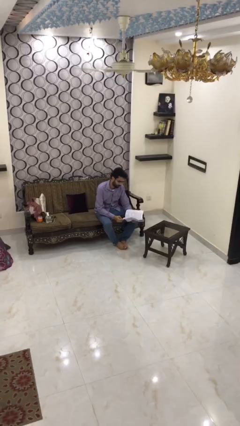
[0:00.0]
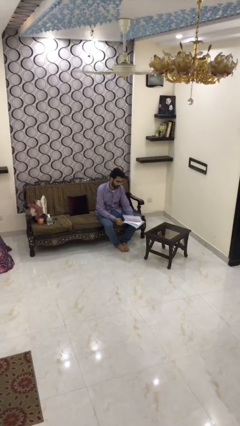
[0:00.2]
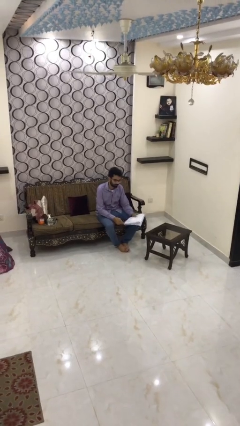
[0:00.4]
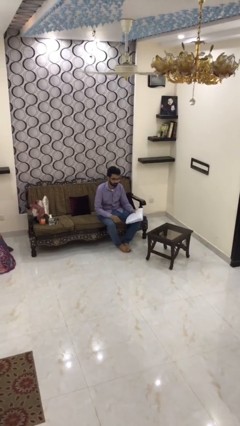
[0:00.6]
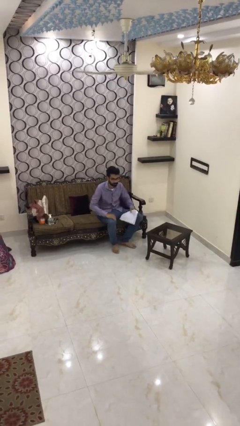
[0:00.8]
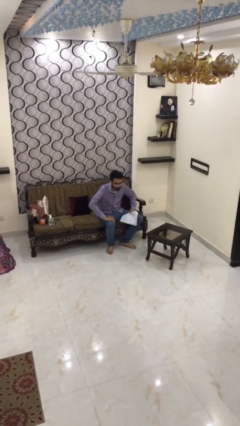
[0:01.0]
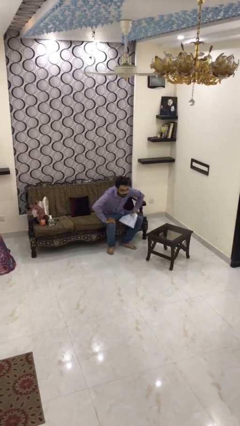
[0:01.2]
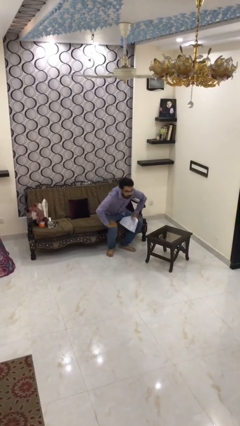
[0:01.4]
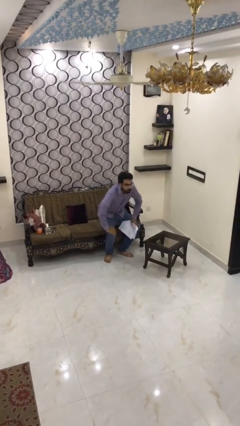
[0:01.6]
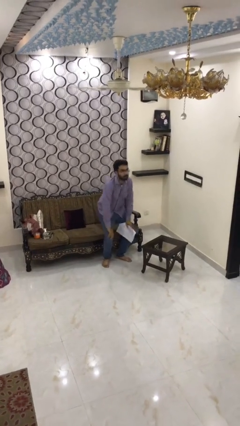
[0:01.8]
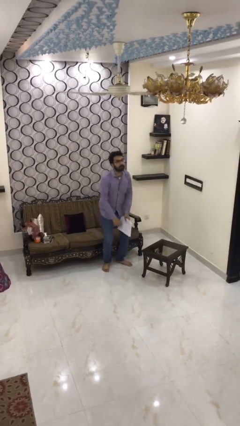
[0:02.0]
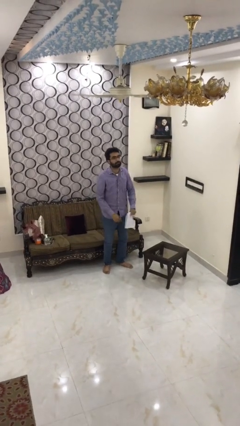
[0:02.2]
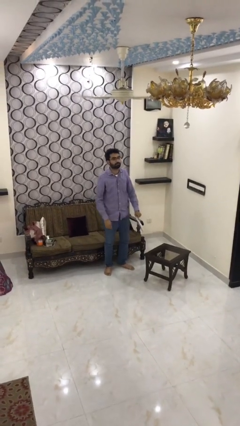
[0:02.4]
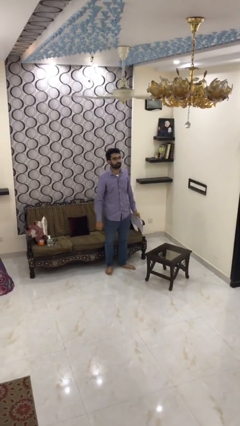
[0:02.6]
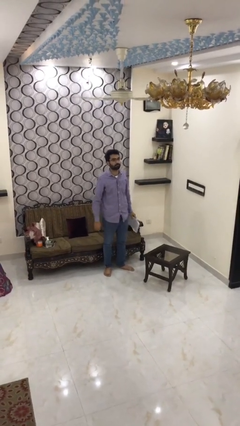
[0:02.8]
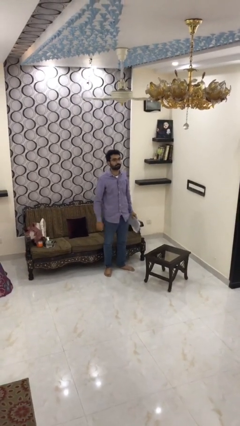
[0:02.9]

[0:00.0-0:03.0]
person stands up

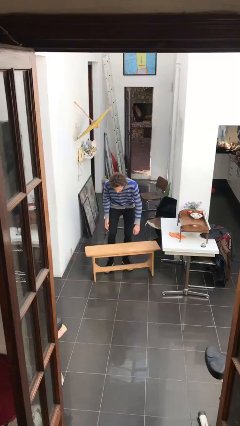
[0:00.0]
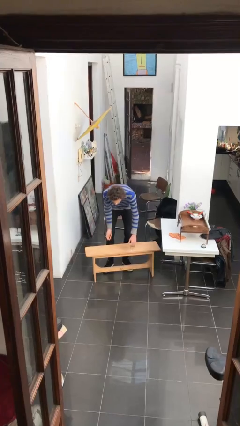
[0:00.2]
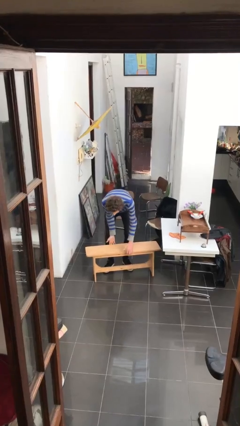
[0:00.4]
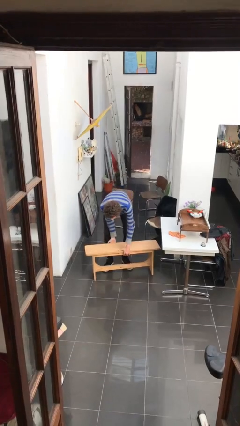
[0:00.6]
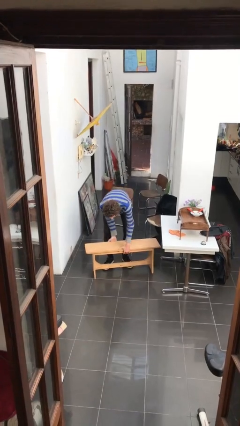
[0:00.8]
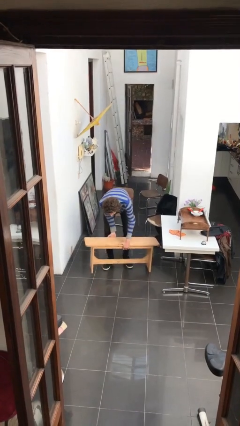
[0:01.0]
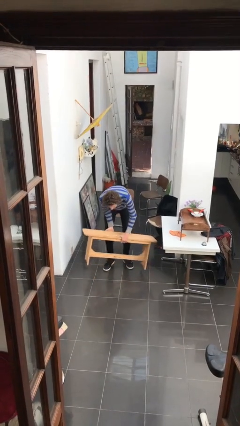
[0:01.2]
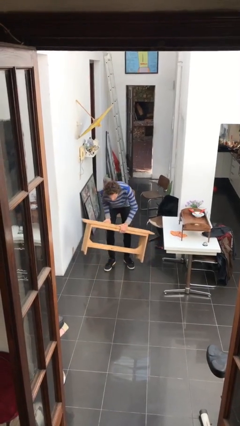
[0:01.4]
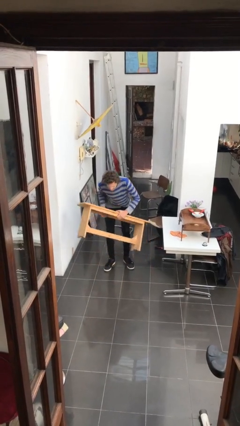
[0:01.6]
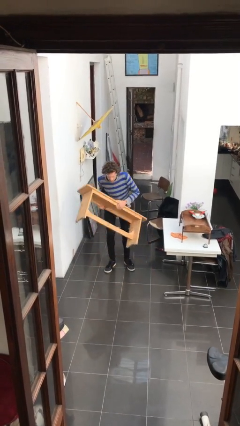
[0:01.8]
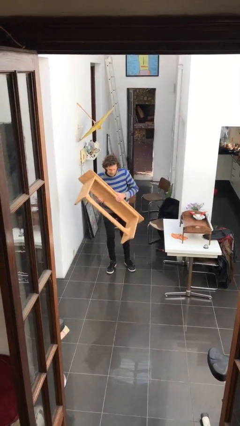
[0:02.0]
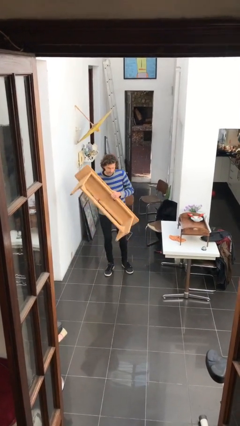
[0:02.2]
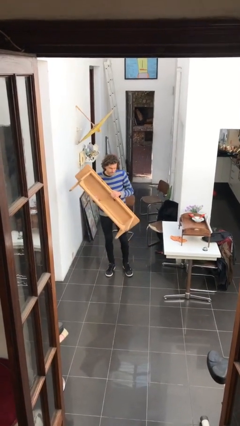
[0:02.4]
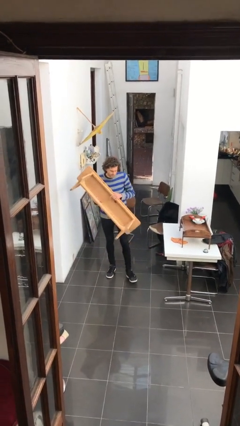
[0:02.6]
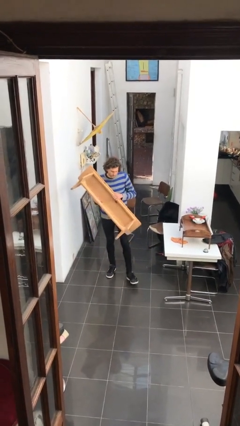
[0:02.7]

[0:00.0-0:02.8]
person picks up object from floor

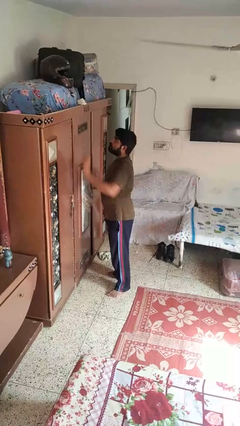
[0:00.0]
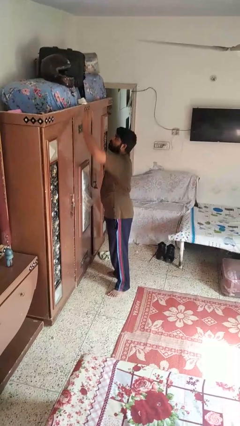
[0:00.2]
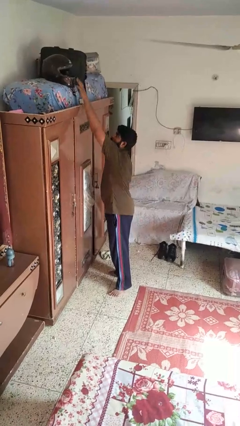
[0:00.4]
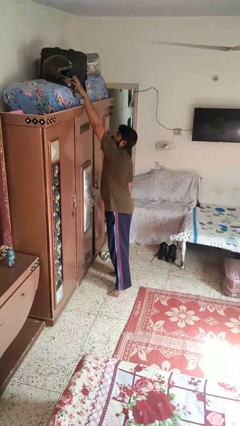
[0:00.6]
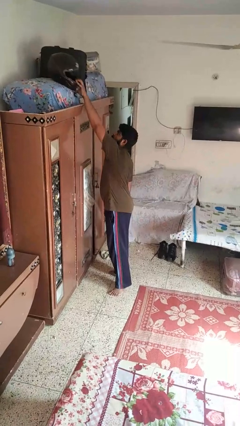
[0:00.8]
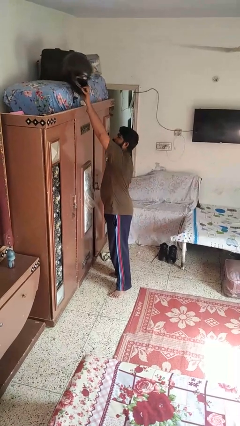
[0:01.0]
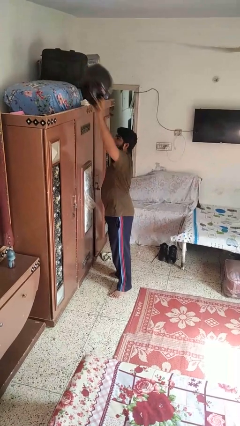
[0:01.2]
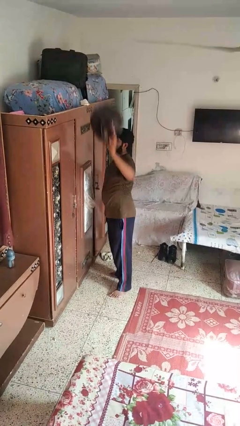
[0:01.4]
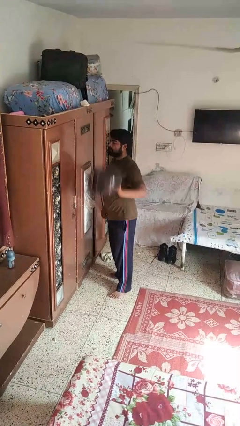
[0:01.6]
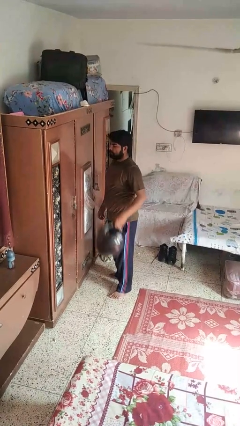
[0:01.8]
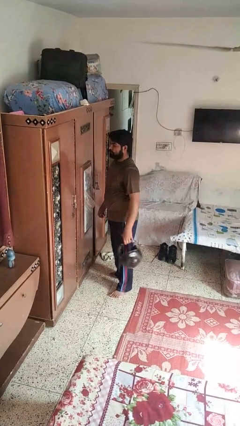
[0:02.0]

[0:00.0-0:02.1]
person picks up object from shelf

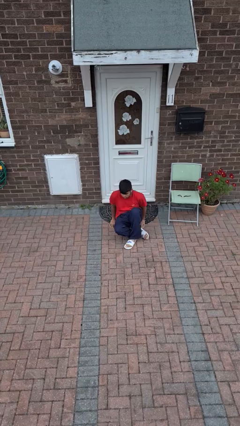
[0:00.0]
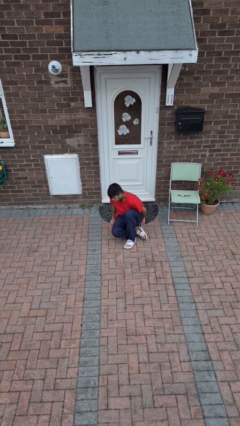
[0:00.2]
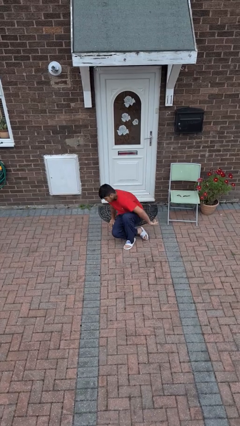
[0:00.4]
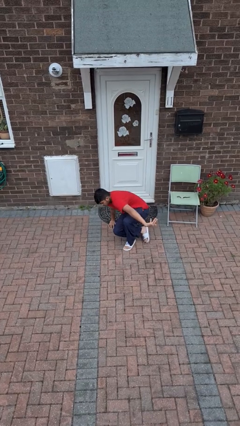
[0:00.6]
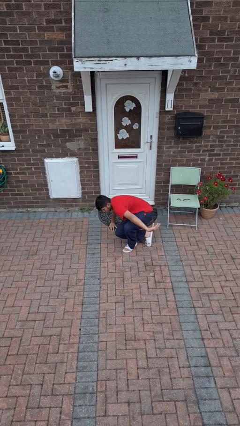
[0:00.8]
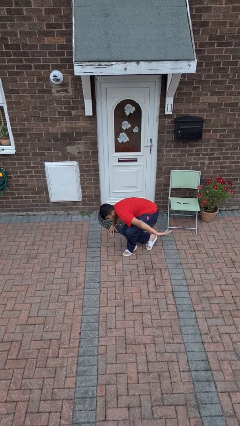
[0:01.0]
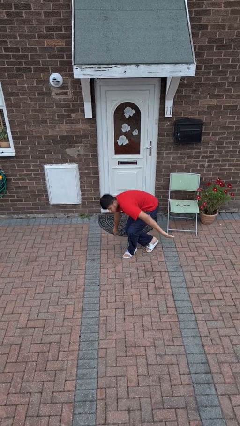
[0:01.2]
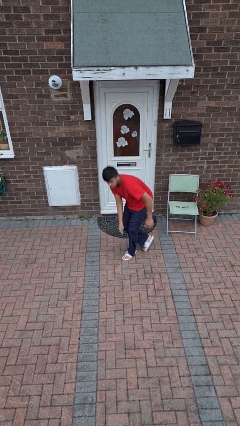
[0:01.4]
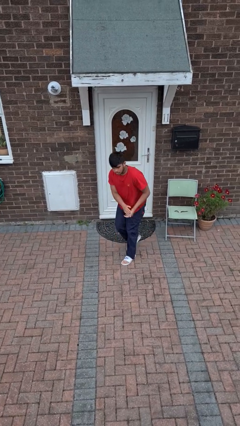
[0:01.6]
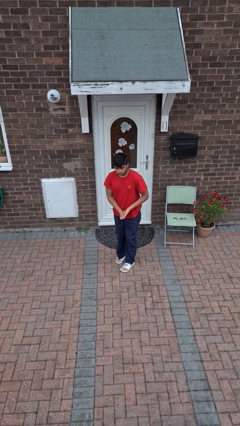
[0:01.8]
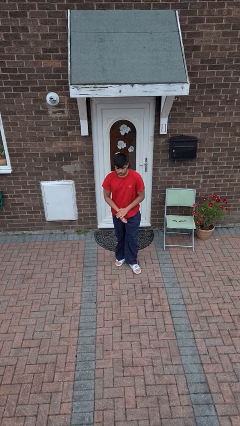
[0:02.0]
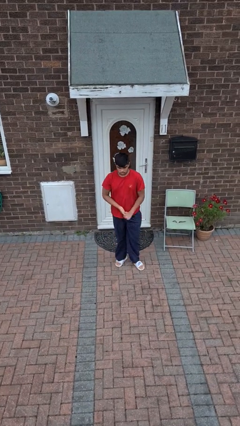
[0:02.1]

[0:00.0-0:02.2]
person stands up from floor

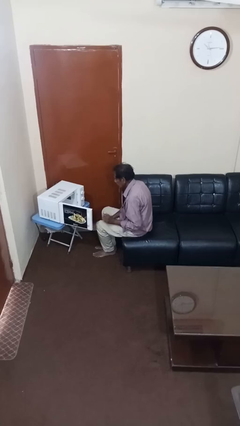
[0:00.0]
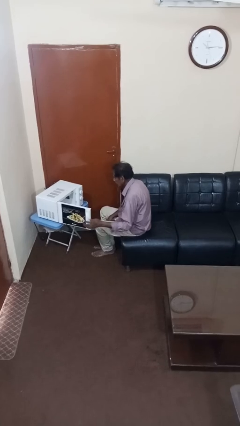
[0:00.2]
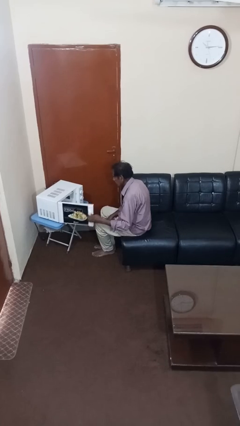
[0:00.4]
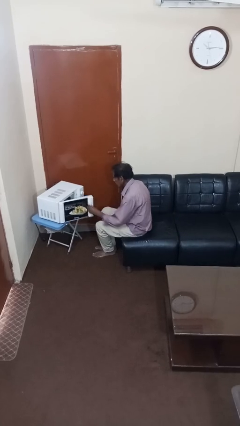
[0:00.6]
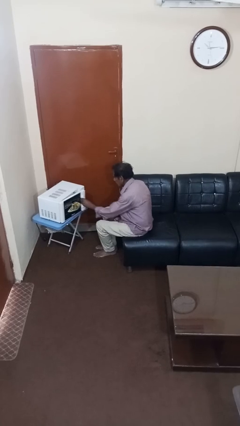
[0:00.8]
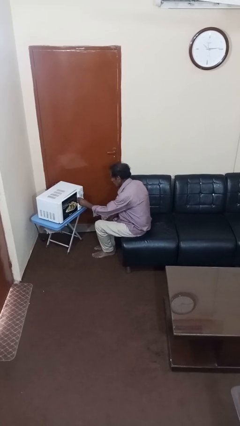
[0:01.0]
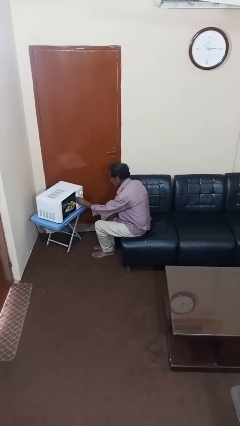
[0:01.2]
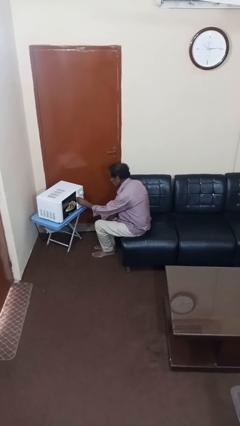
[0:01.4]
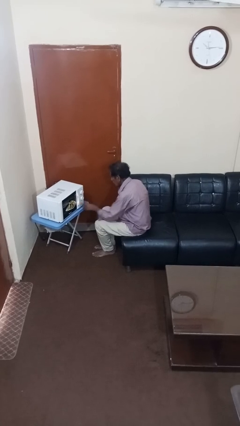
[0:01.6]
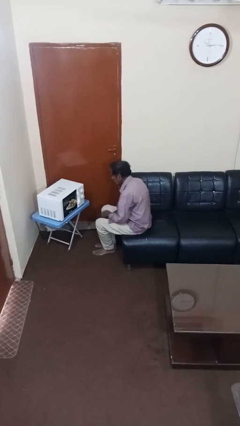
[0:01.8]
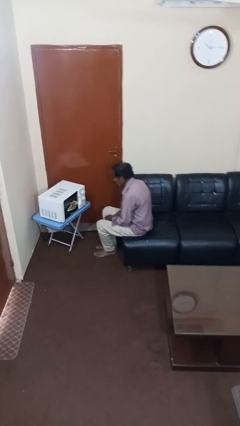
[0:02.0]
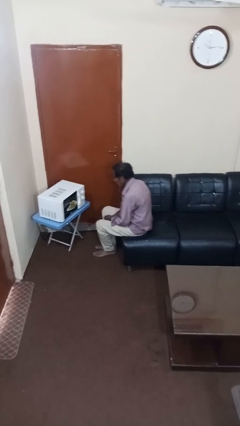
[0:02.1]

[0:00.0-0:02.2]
person closes microwave

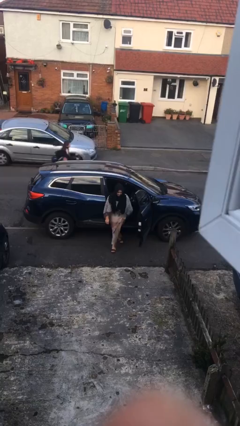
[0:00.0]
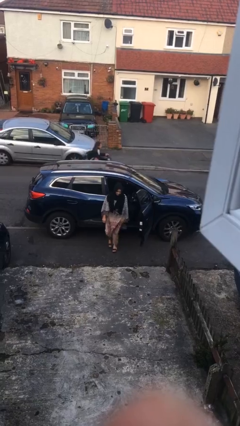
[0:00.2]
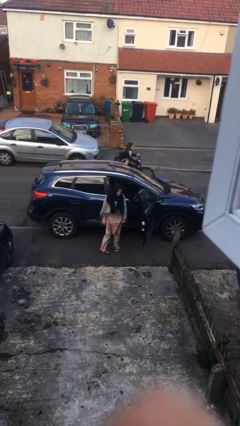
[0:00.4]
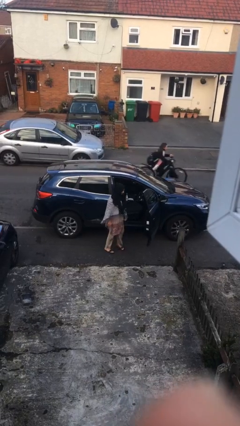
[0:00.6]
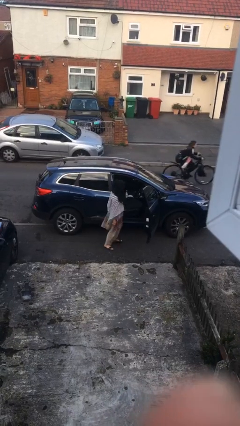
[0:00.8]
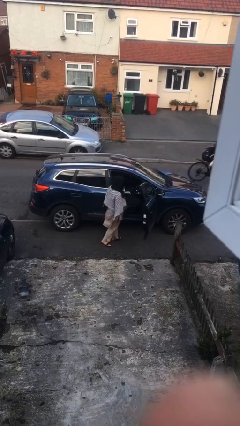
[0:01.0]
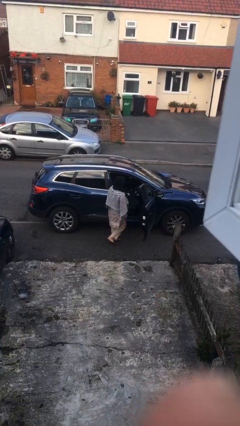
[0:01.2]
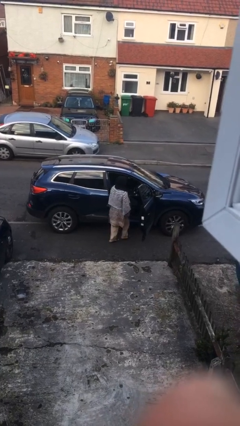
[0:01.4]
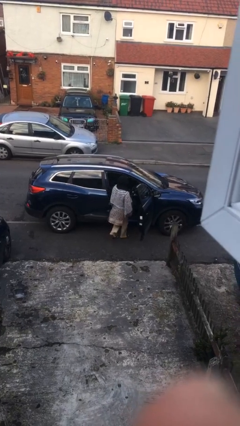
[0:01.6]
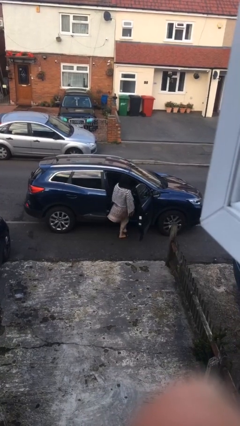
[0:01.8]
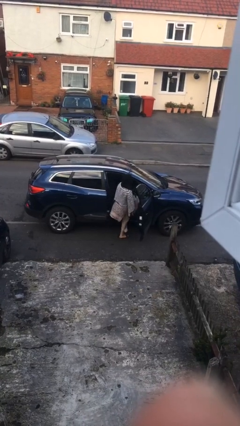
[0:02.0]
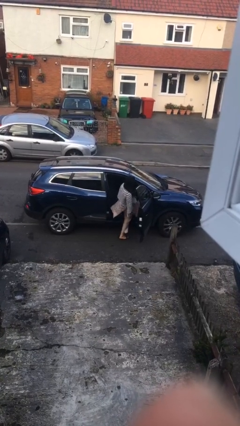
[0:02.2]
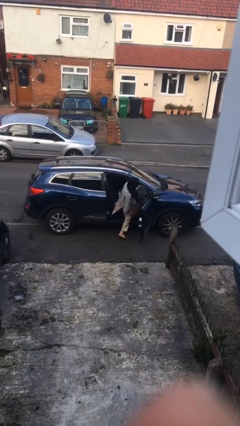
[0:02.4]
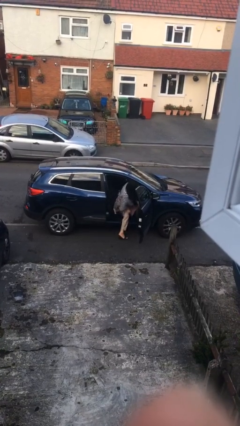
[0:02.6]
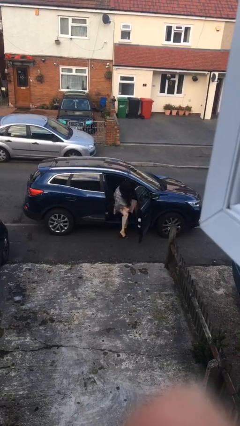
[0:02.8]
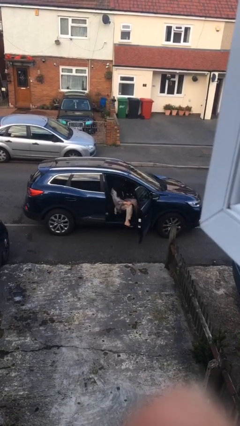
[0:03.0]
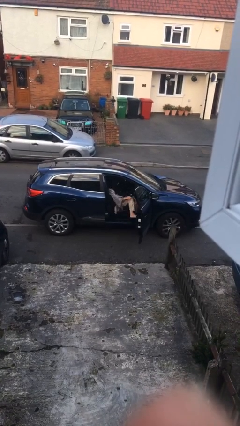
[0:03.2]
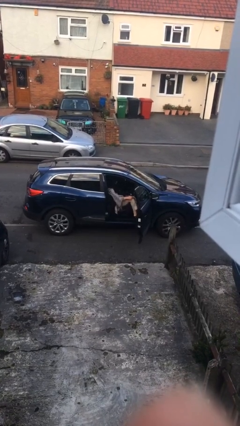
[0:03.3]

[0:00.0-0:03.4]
person enters car

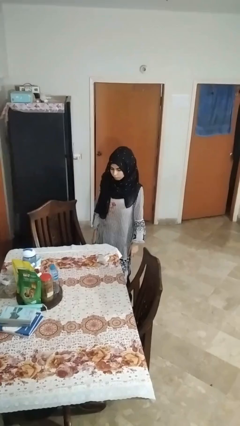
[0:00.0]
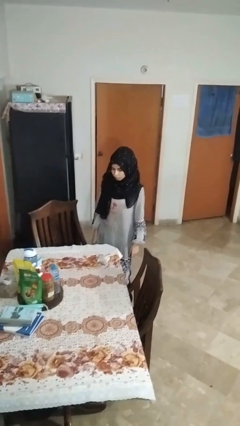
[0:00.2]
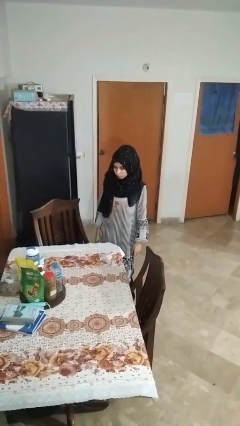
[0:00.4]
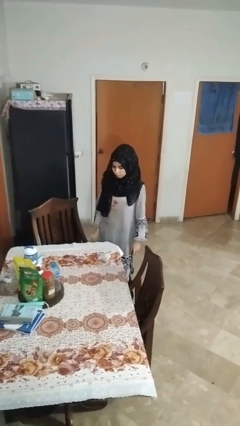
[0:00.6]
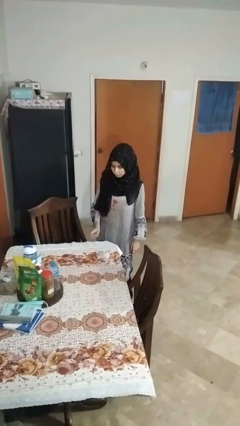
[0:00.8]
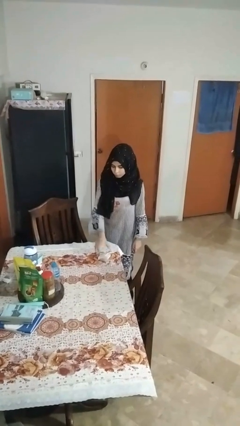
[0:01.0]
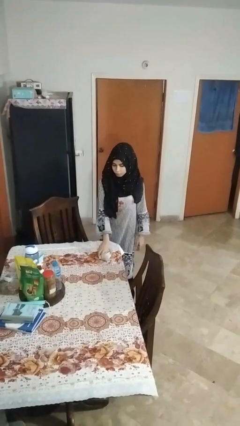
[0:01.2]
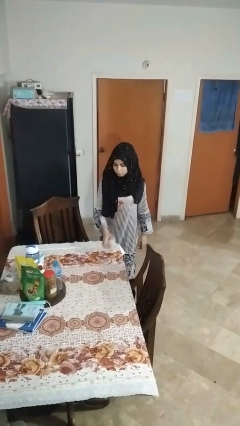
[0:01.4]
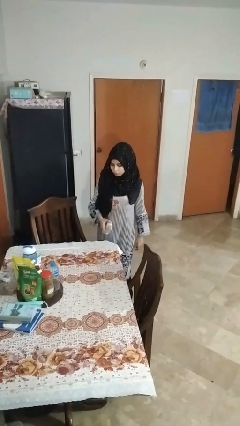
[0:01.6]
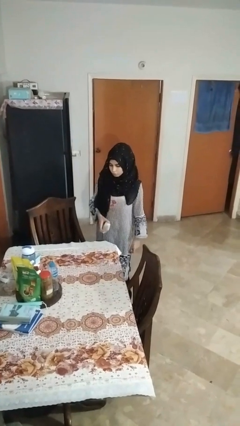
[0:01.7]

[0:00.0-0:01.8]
person picks up object from table
